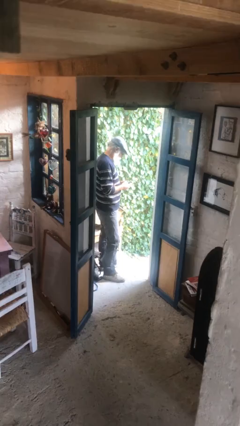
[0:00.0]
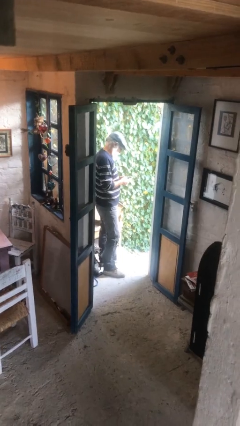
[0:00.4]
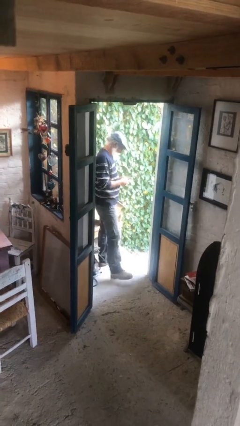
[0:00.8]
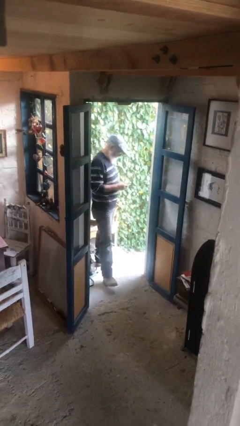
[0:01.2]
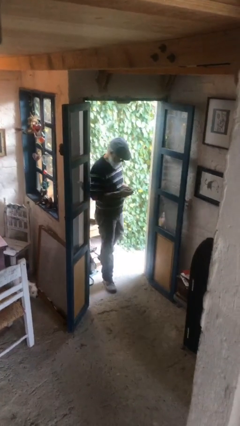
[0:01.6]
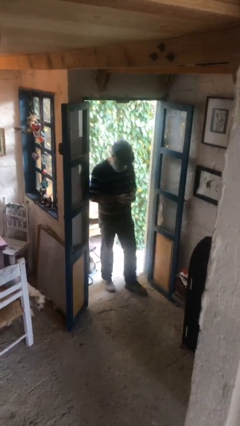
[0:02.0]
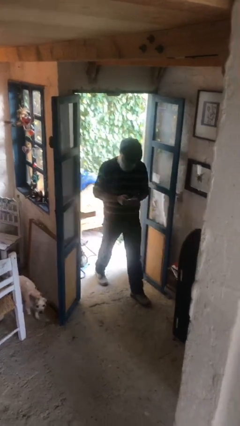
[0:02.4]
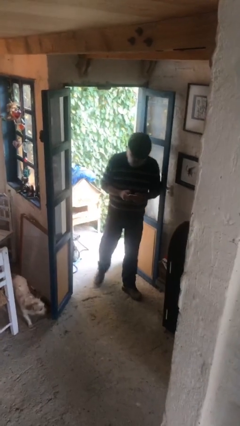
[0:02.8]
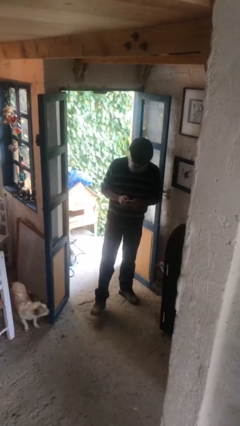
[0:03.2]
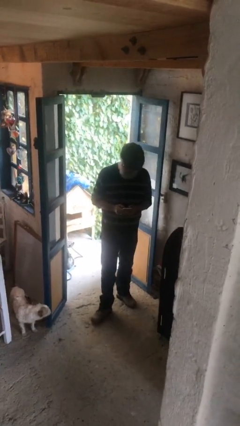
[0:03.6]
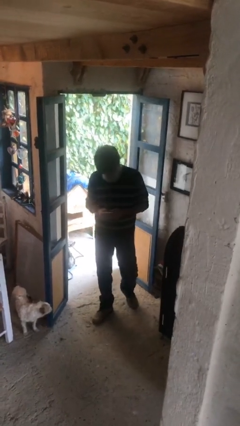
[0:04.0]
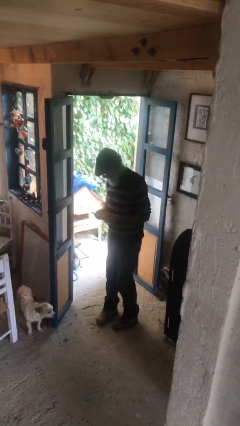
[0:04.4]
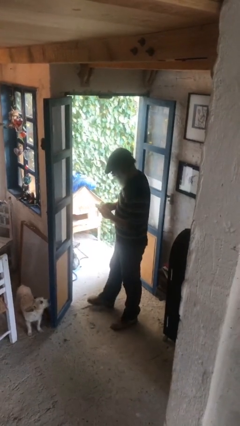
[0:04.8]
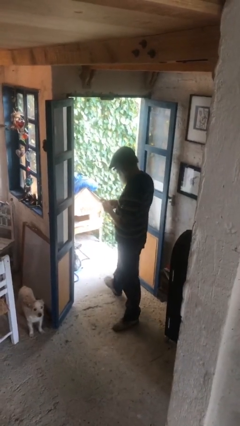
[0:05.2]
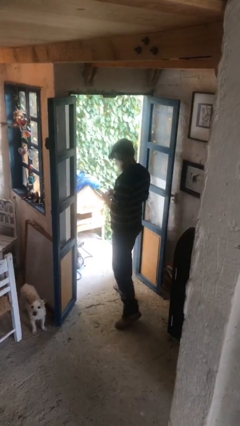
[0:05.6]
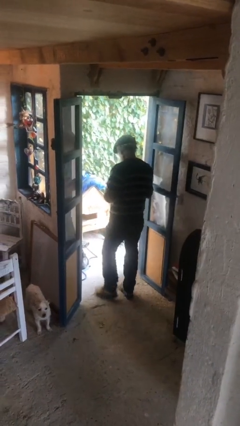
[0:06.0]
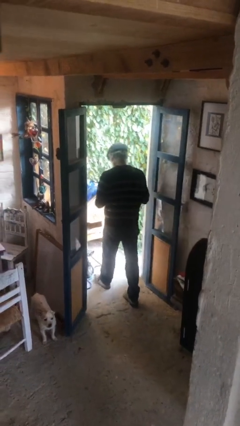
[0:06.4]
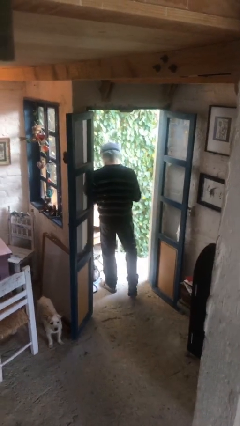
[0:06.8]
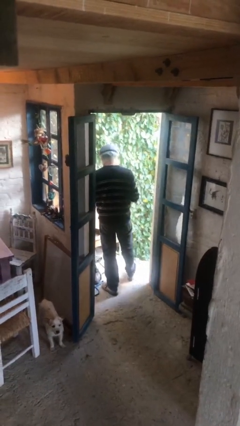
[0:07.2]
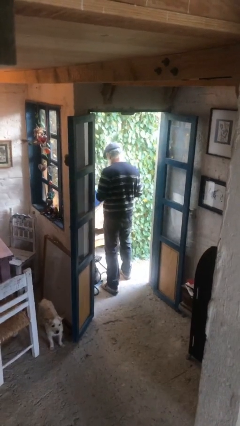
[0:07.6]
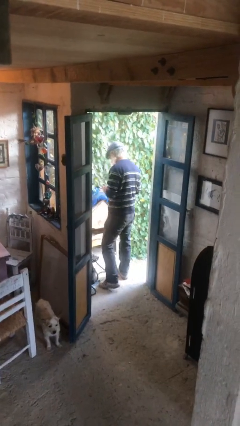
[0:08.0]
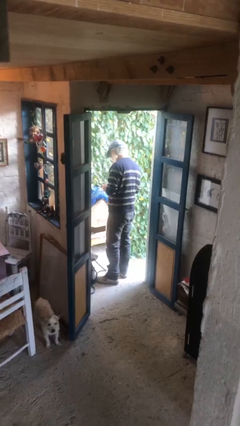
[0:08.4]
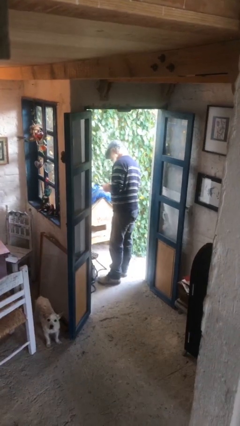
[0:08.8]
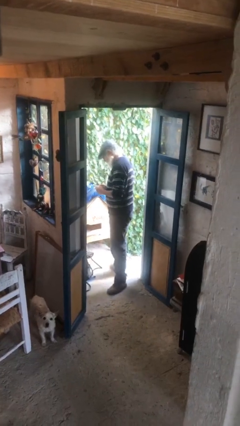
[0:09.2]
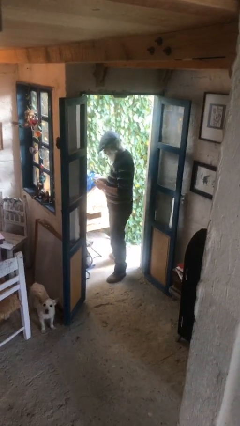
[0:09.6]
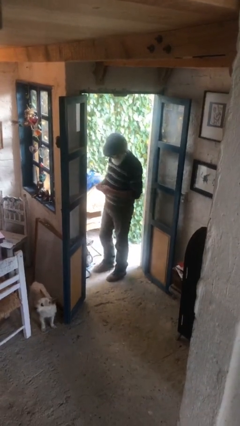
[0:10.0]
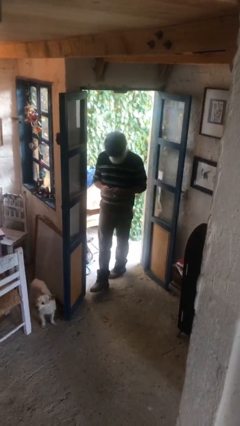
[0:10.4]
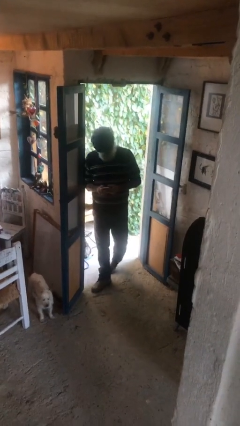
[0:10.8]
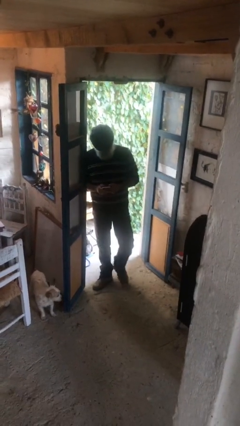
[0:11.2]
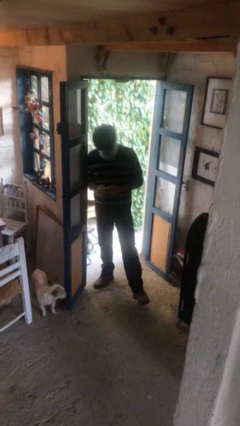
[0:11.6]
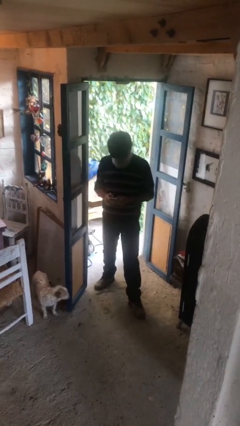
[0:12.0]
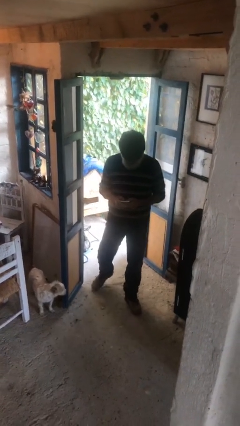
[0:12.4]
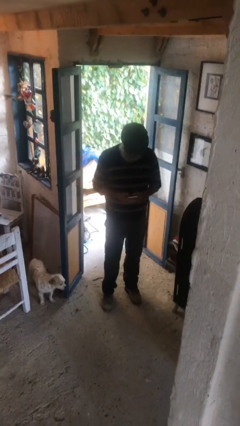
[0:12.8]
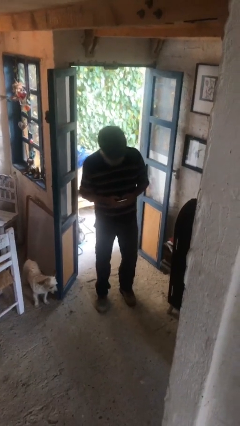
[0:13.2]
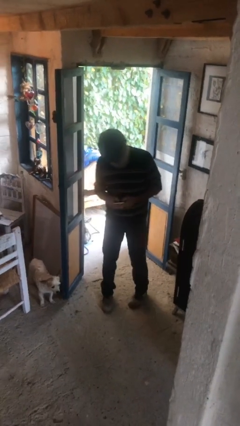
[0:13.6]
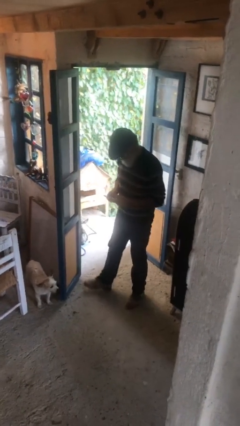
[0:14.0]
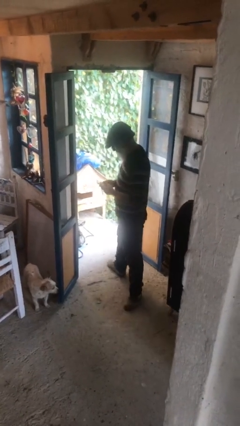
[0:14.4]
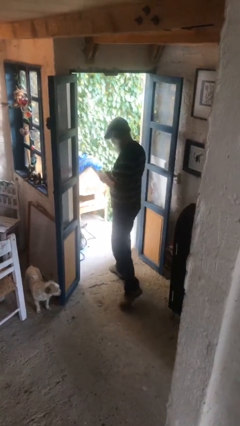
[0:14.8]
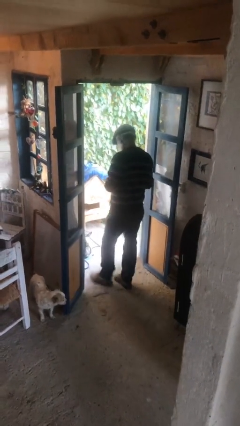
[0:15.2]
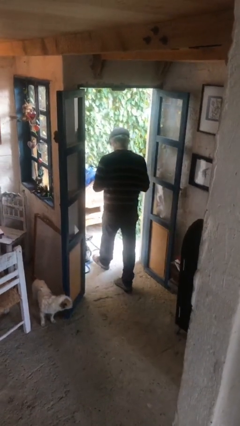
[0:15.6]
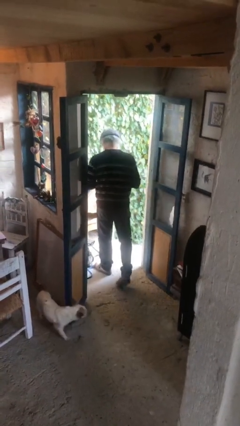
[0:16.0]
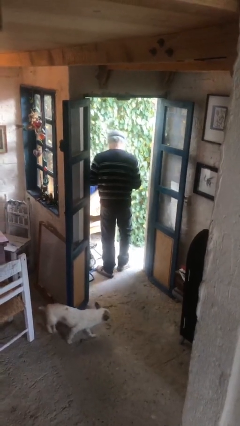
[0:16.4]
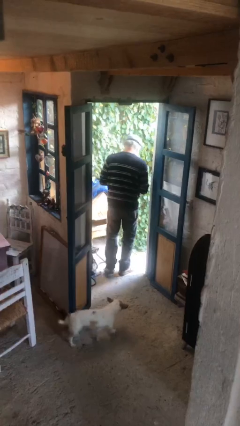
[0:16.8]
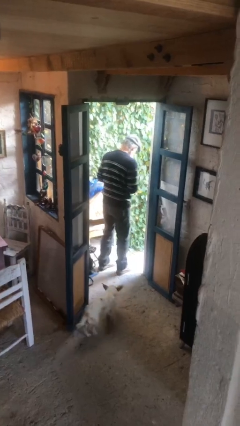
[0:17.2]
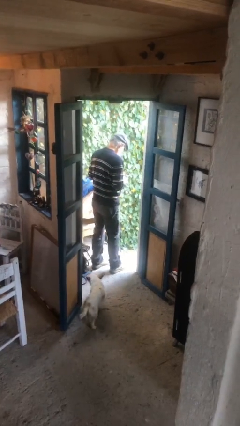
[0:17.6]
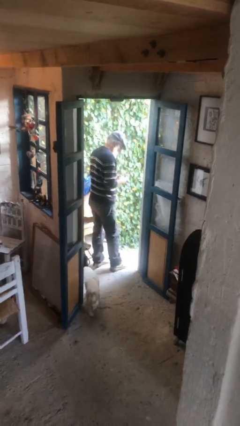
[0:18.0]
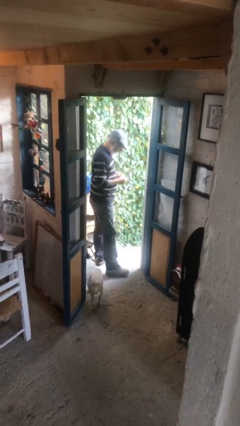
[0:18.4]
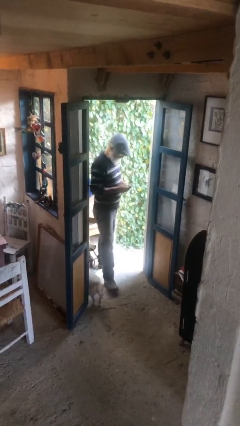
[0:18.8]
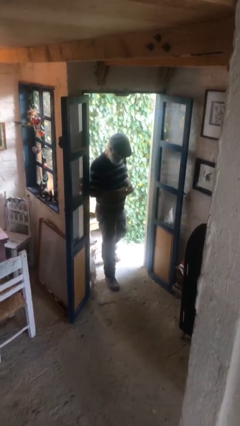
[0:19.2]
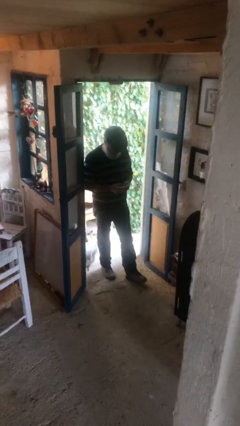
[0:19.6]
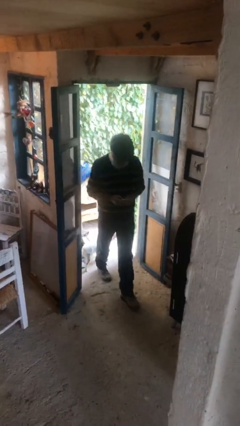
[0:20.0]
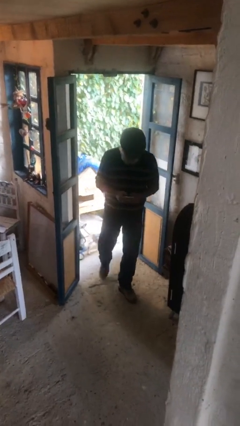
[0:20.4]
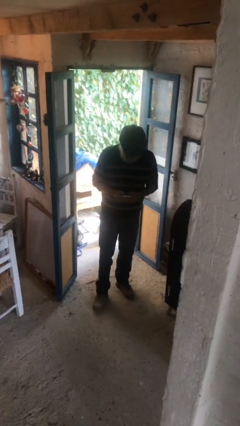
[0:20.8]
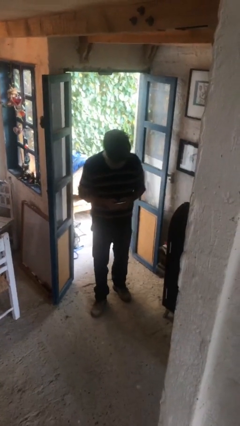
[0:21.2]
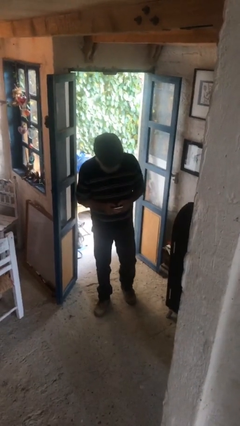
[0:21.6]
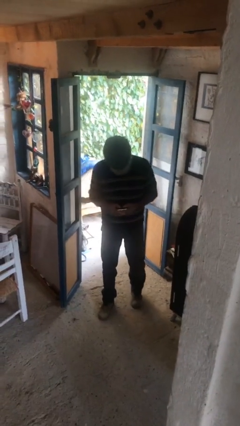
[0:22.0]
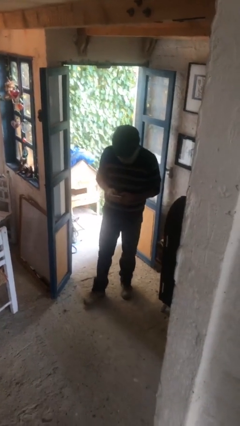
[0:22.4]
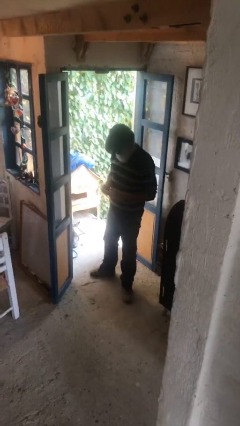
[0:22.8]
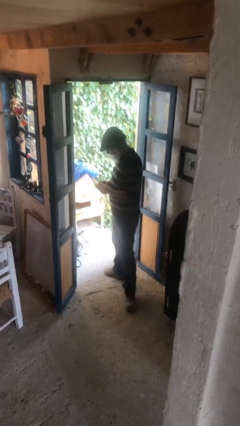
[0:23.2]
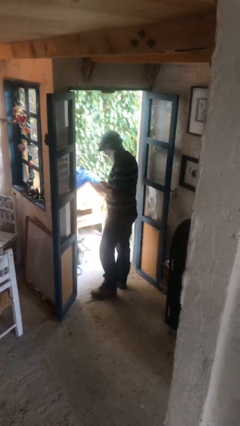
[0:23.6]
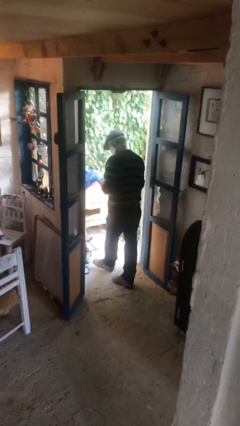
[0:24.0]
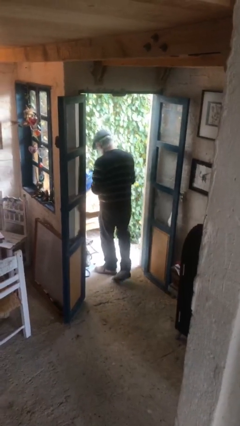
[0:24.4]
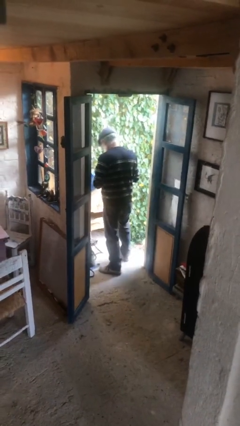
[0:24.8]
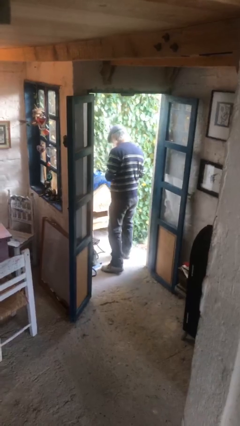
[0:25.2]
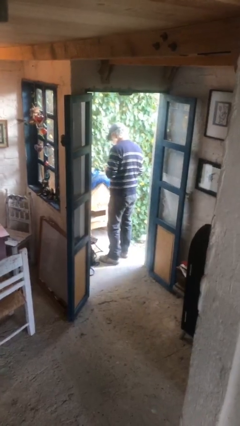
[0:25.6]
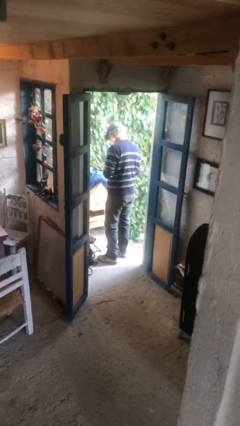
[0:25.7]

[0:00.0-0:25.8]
person texts on phone

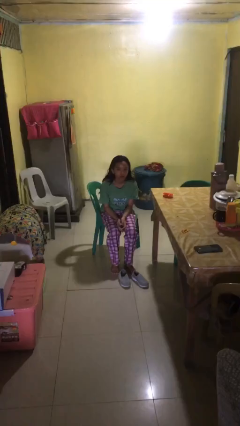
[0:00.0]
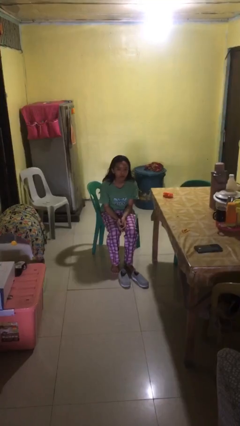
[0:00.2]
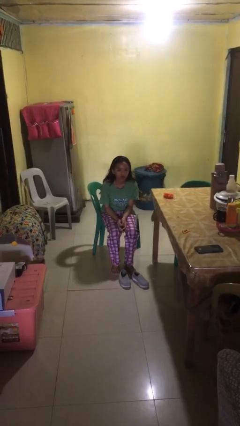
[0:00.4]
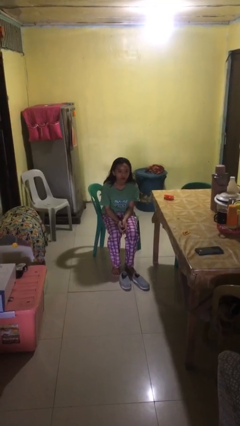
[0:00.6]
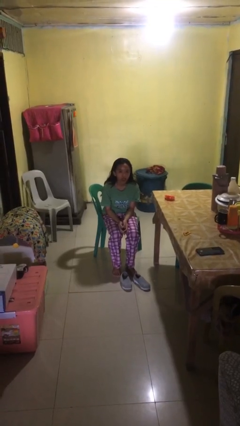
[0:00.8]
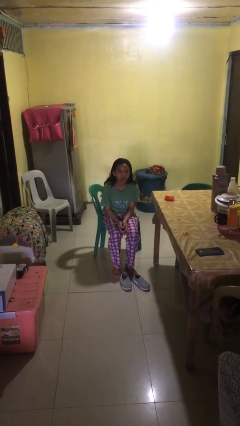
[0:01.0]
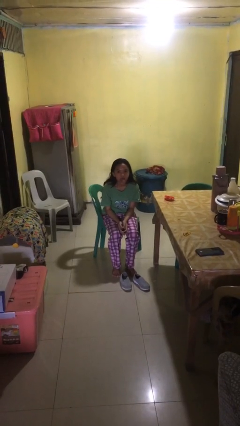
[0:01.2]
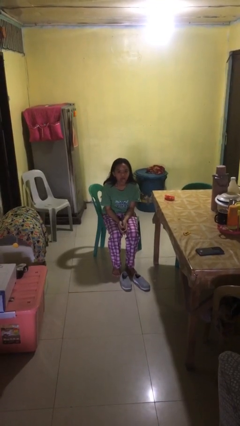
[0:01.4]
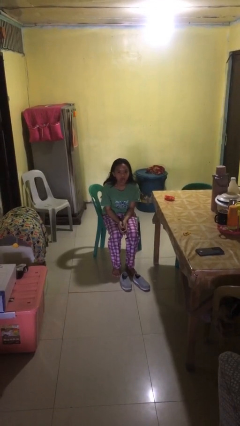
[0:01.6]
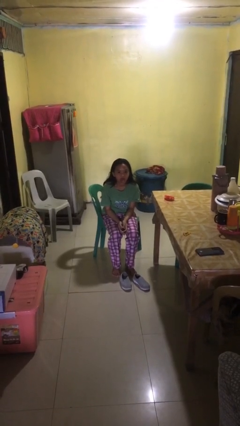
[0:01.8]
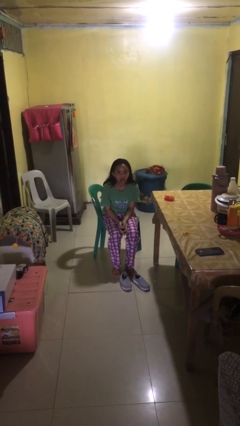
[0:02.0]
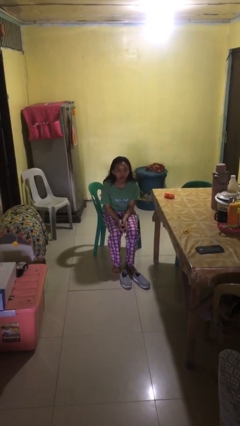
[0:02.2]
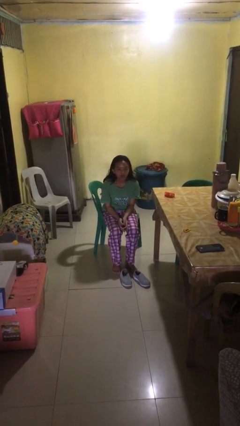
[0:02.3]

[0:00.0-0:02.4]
person sticks out tongue

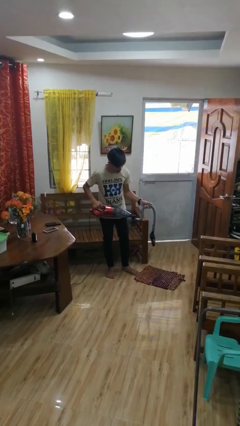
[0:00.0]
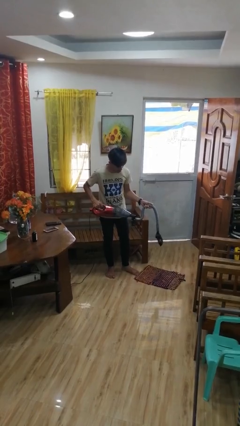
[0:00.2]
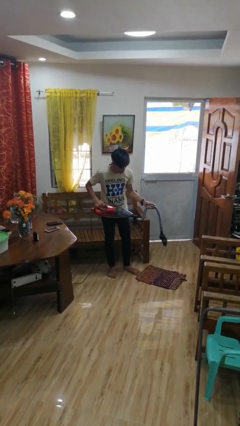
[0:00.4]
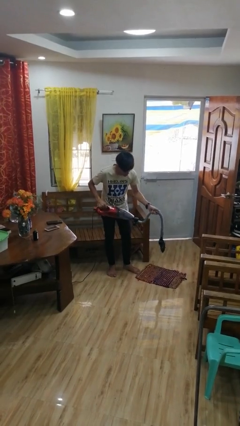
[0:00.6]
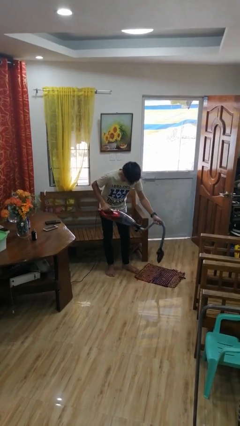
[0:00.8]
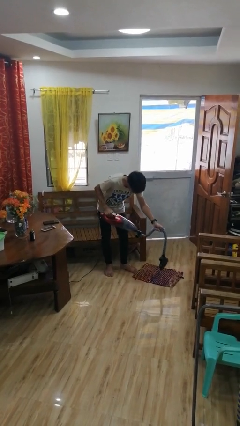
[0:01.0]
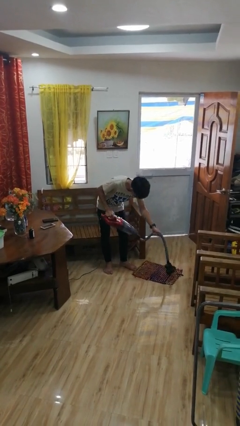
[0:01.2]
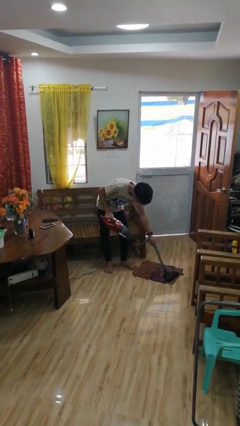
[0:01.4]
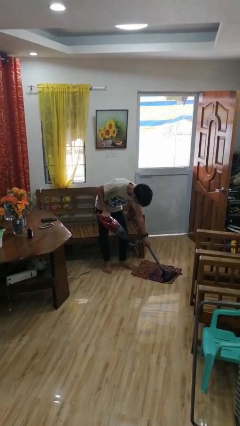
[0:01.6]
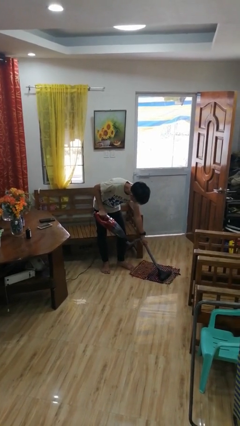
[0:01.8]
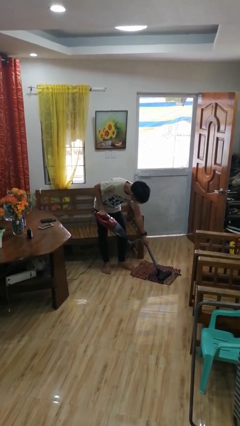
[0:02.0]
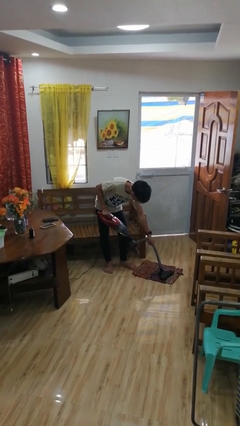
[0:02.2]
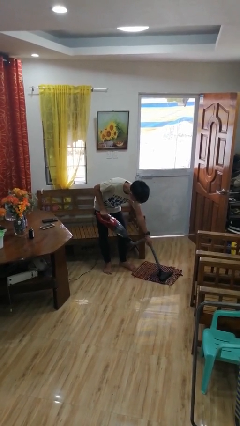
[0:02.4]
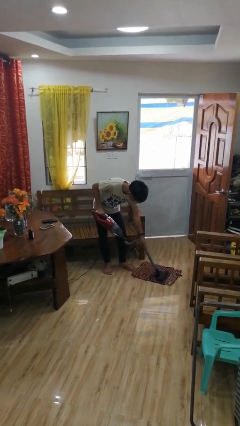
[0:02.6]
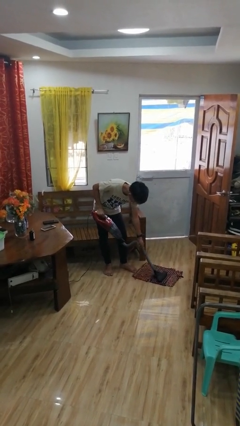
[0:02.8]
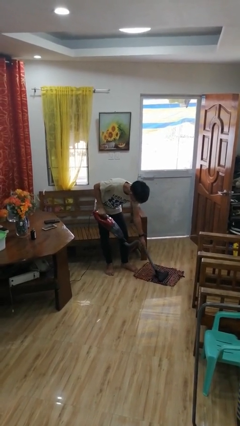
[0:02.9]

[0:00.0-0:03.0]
person vacuums carpet
